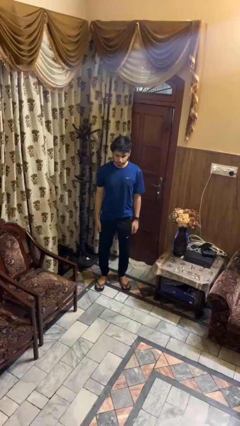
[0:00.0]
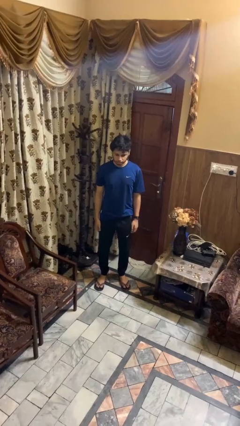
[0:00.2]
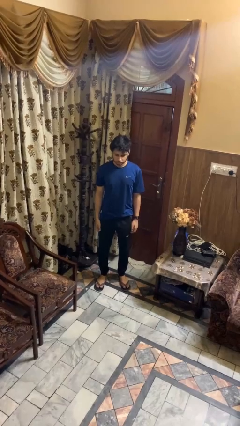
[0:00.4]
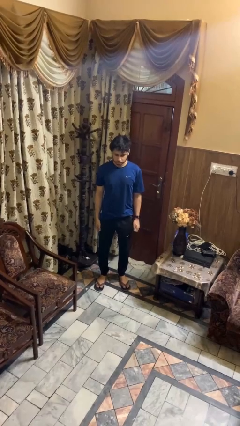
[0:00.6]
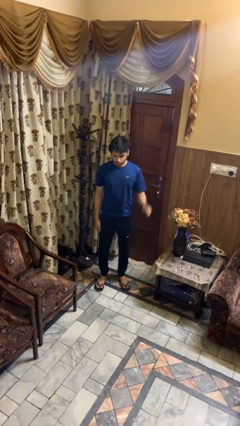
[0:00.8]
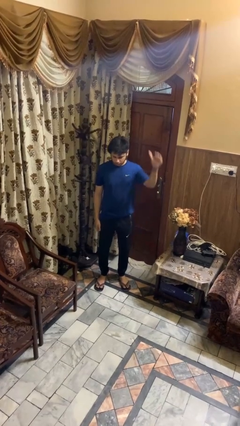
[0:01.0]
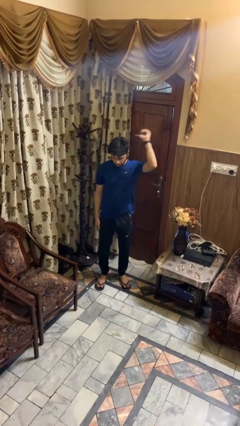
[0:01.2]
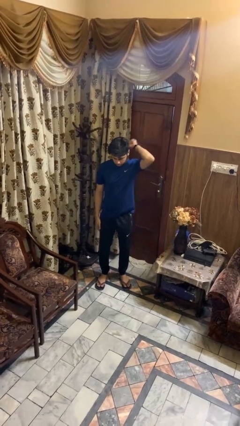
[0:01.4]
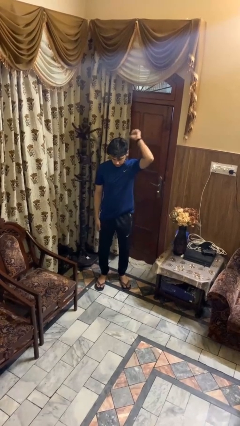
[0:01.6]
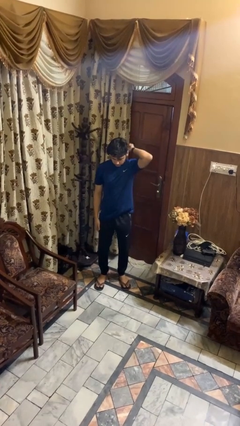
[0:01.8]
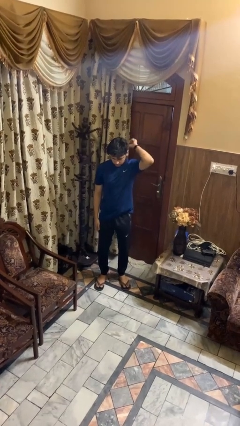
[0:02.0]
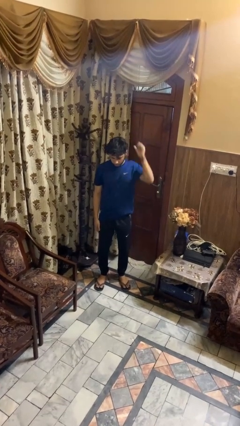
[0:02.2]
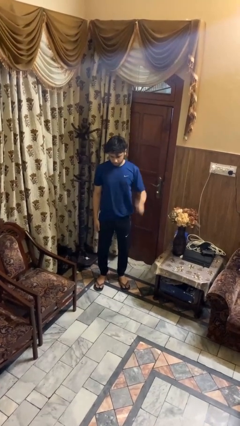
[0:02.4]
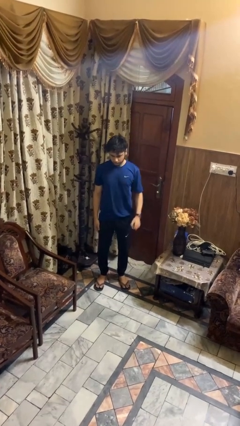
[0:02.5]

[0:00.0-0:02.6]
person gestures behind me

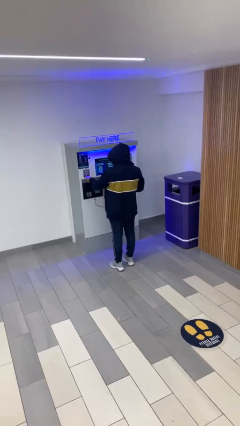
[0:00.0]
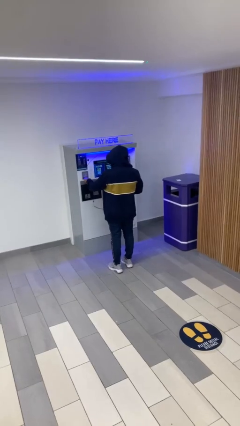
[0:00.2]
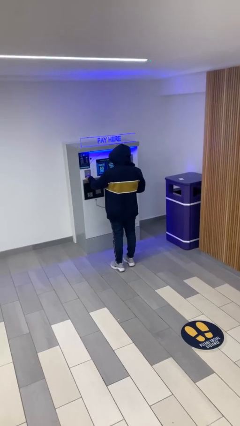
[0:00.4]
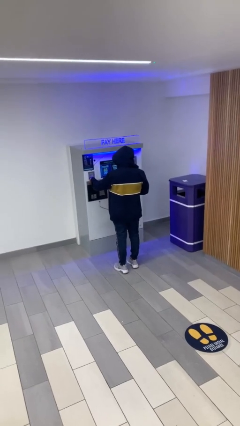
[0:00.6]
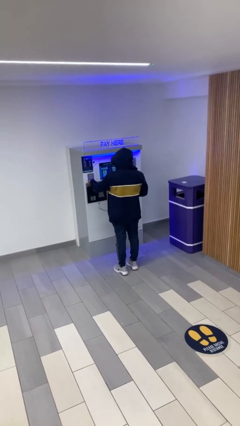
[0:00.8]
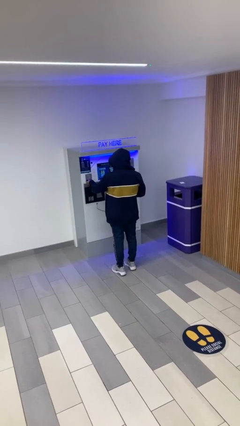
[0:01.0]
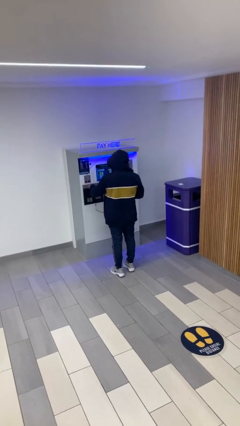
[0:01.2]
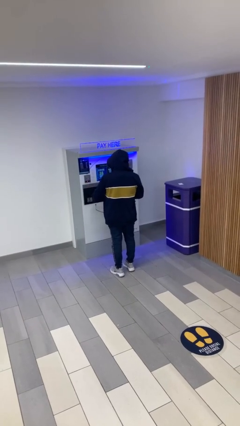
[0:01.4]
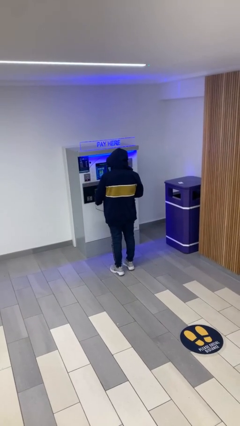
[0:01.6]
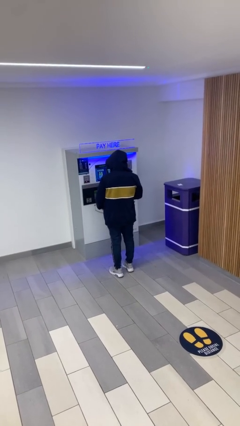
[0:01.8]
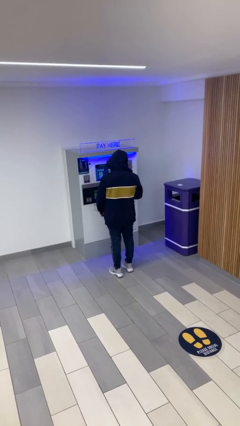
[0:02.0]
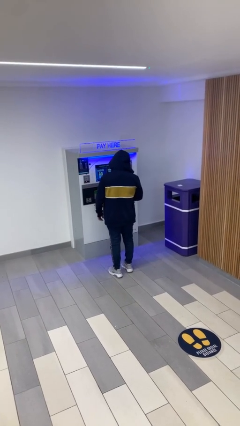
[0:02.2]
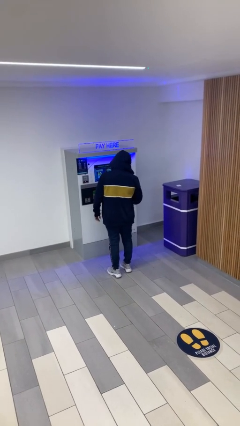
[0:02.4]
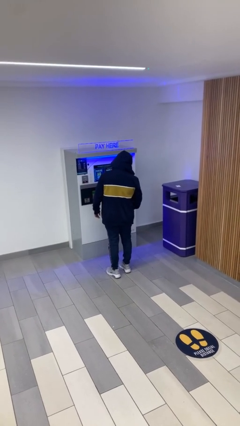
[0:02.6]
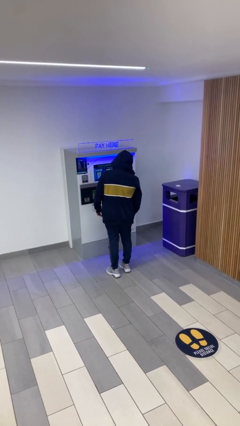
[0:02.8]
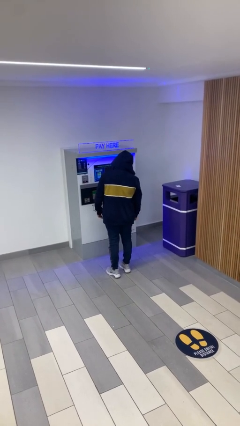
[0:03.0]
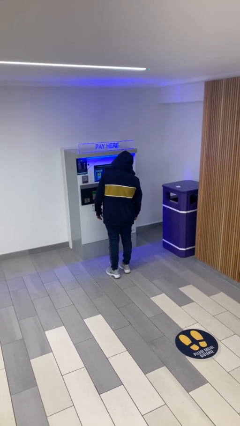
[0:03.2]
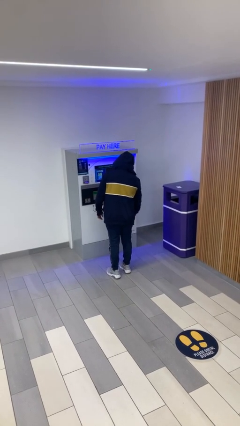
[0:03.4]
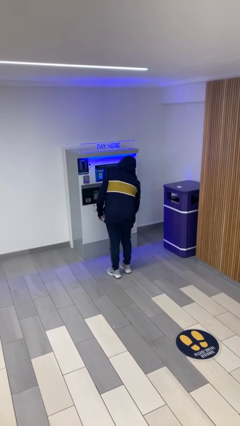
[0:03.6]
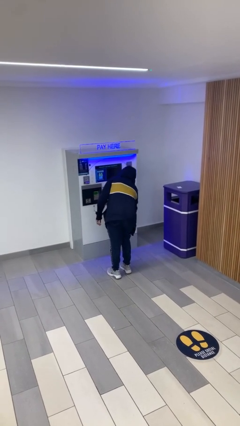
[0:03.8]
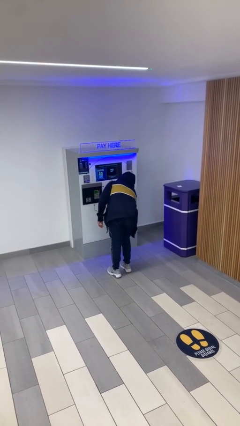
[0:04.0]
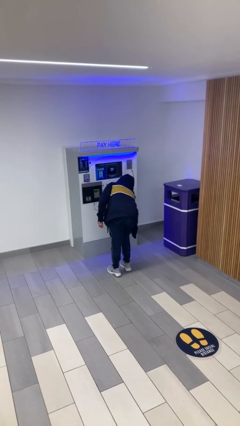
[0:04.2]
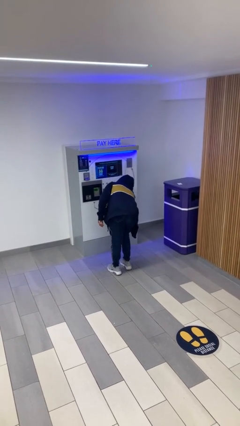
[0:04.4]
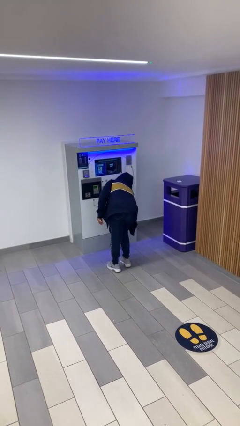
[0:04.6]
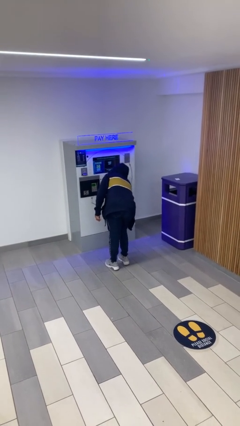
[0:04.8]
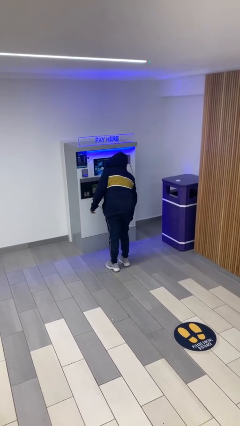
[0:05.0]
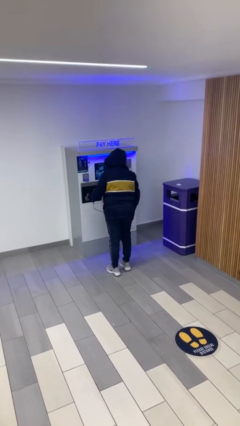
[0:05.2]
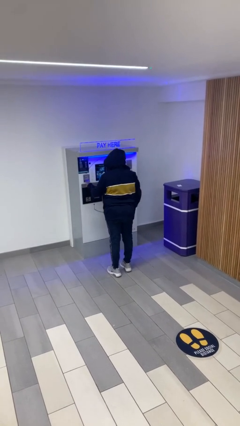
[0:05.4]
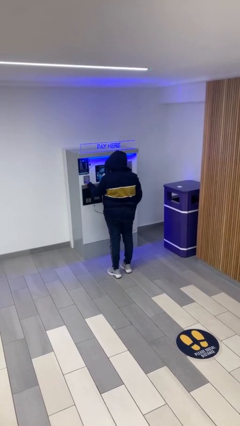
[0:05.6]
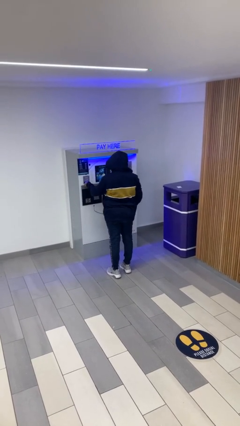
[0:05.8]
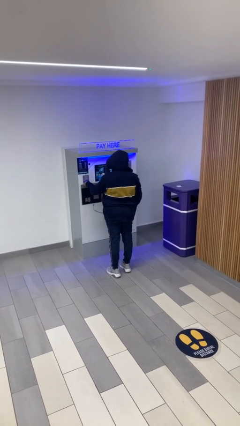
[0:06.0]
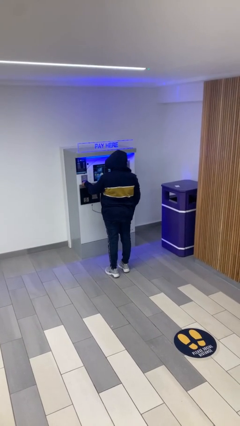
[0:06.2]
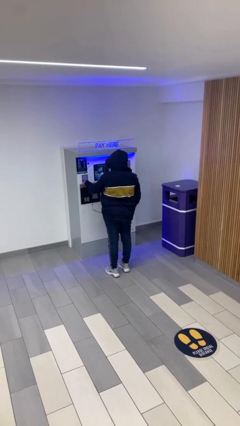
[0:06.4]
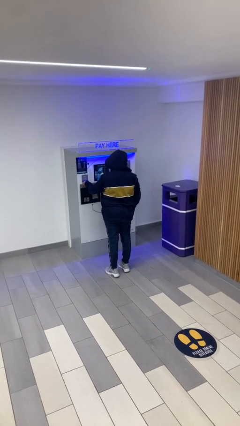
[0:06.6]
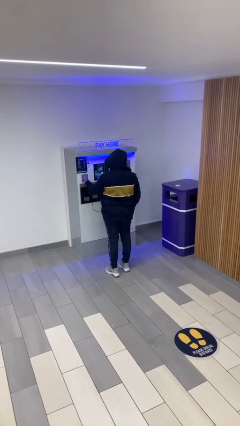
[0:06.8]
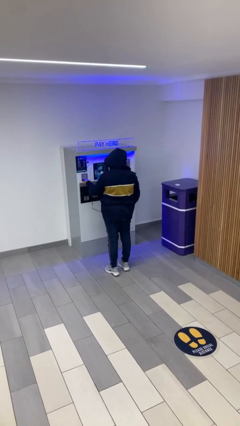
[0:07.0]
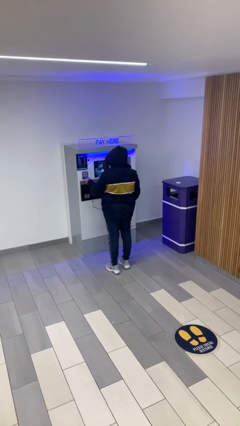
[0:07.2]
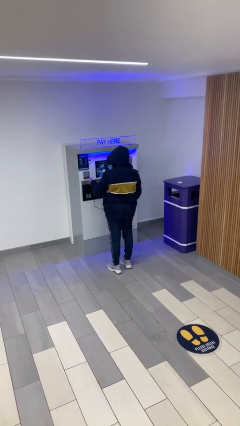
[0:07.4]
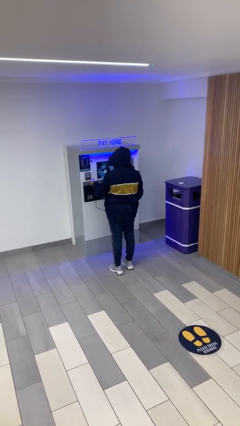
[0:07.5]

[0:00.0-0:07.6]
person purchases from machine

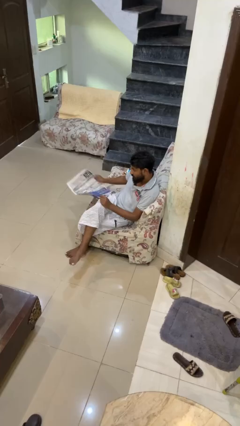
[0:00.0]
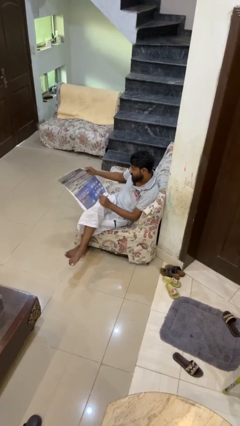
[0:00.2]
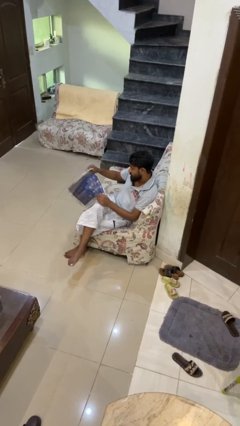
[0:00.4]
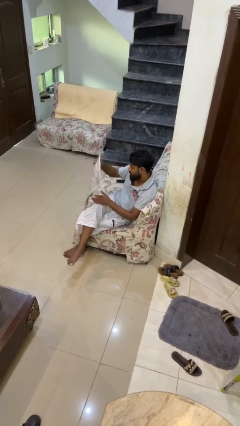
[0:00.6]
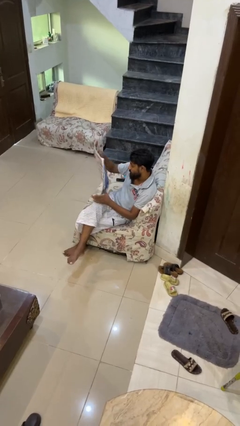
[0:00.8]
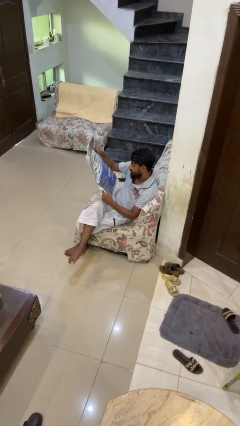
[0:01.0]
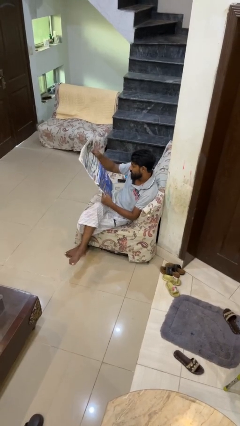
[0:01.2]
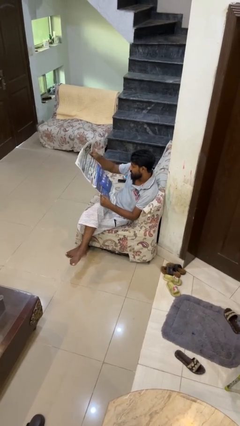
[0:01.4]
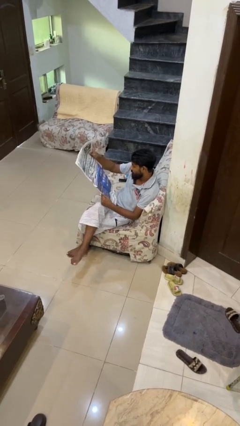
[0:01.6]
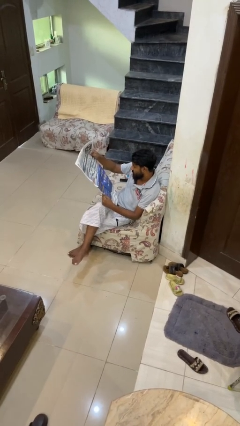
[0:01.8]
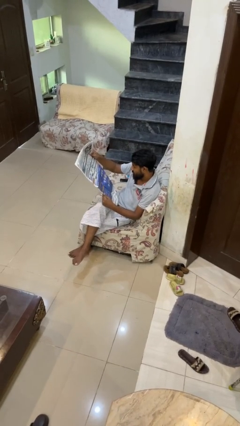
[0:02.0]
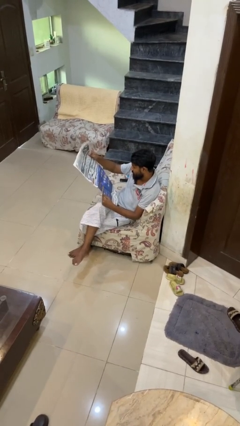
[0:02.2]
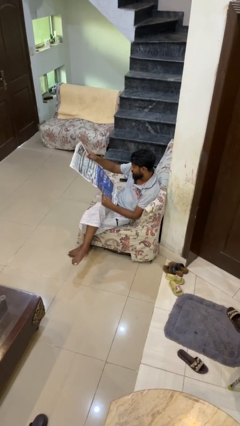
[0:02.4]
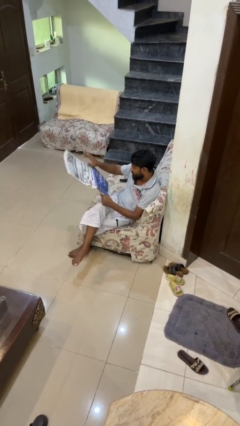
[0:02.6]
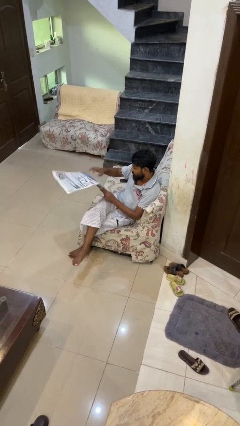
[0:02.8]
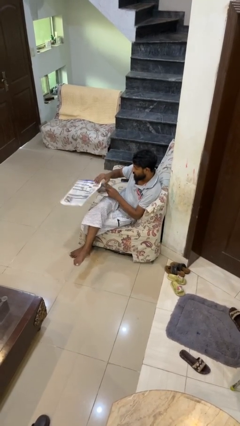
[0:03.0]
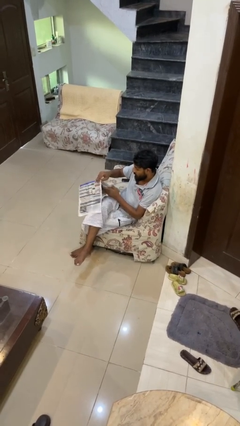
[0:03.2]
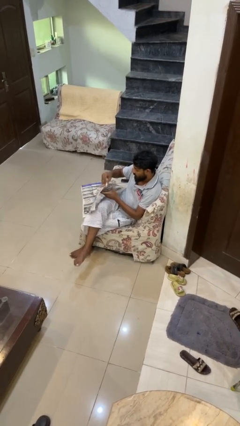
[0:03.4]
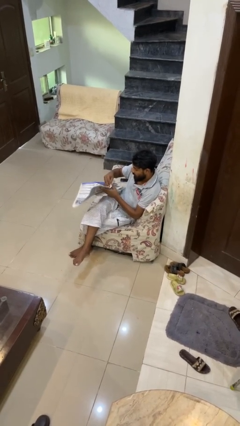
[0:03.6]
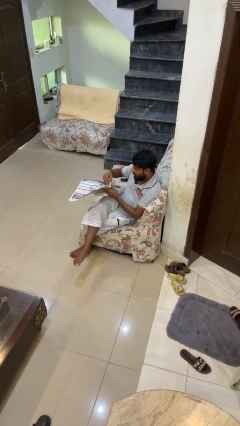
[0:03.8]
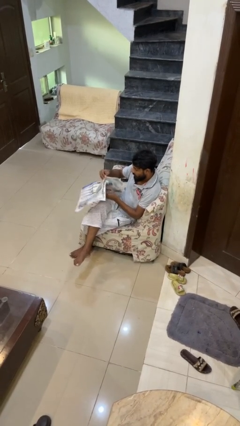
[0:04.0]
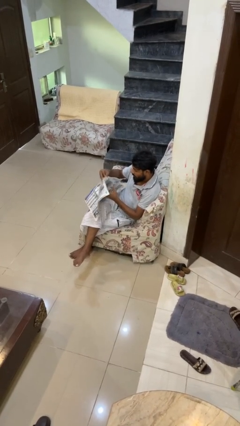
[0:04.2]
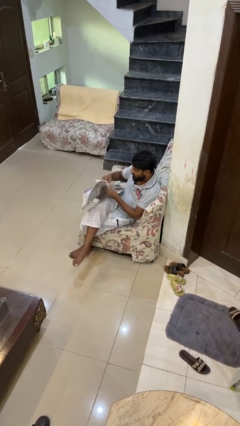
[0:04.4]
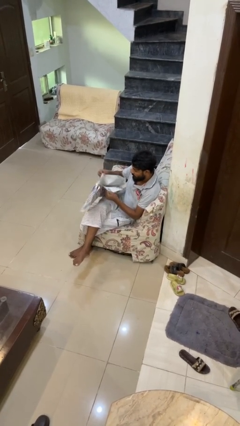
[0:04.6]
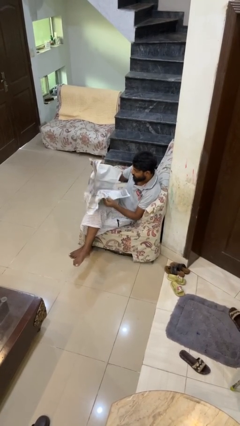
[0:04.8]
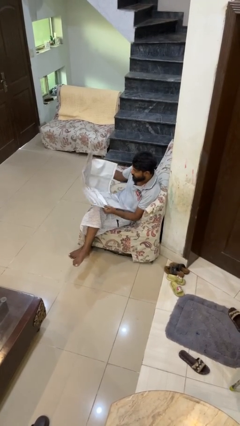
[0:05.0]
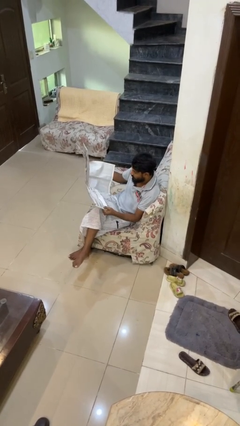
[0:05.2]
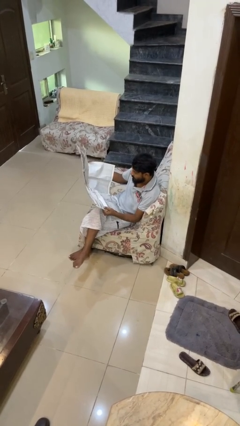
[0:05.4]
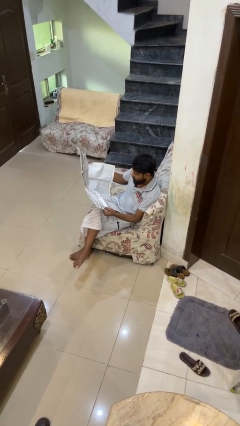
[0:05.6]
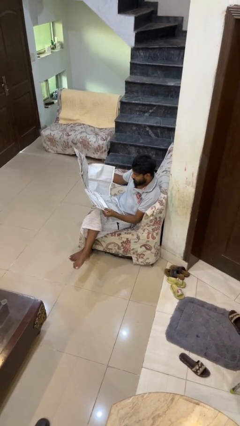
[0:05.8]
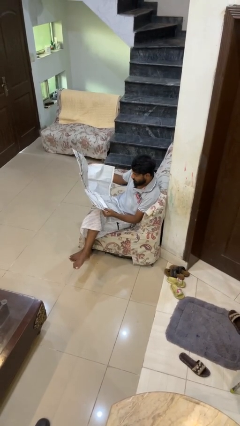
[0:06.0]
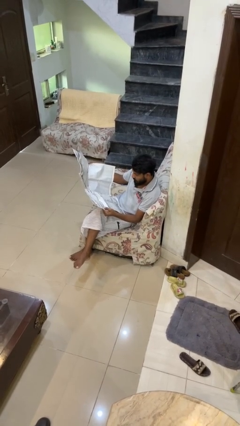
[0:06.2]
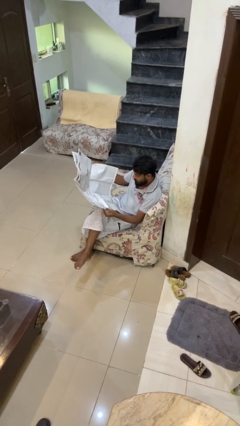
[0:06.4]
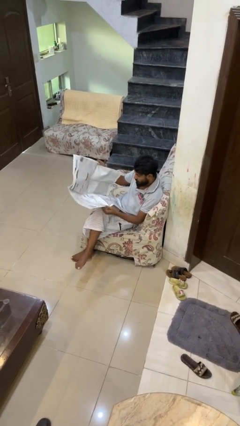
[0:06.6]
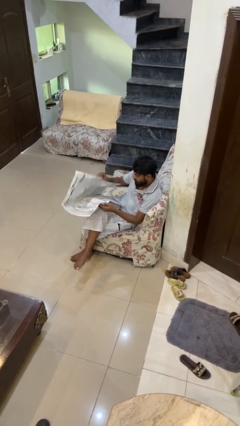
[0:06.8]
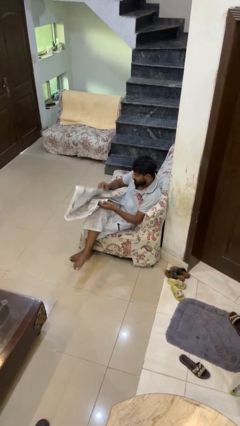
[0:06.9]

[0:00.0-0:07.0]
person reads newspaper

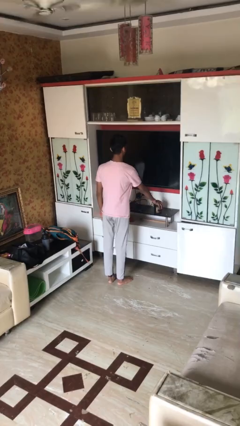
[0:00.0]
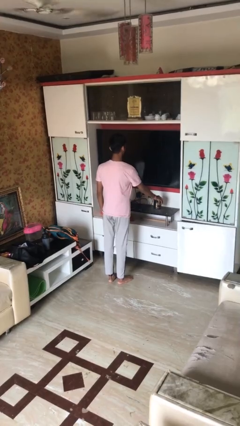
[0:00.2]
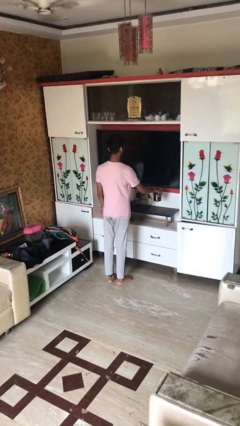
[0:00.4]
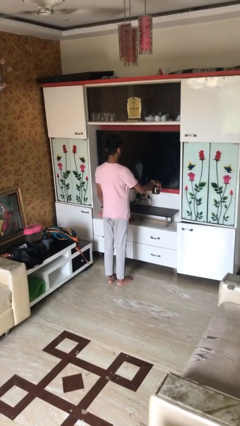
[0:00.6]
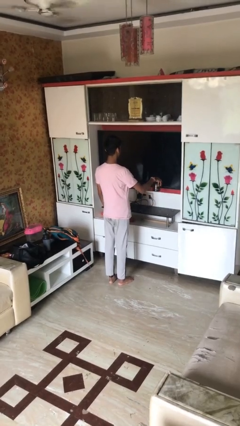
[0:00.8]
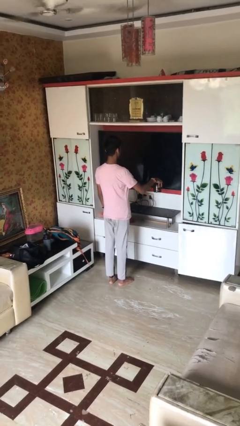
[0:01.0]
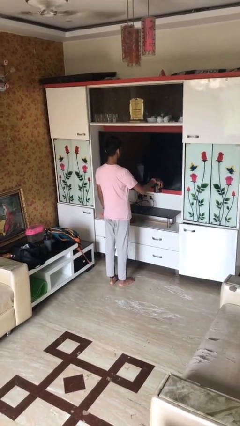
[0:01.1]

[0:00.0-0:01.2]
person picks up object from countertop
